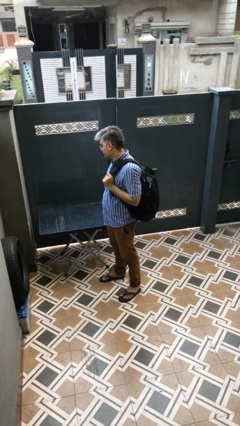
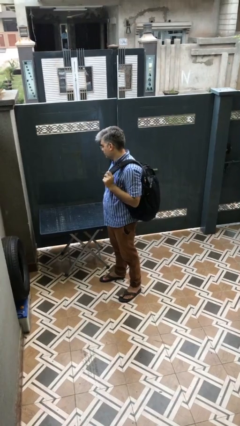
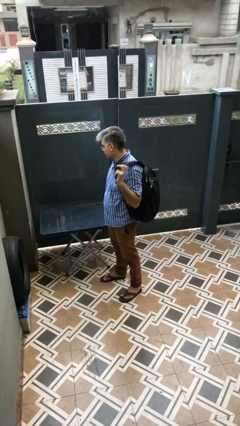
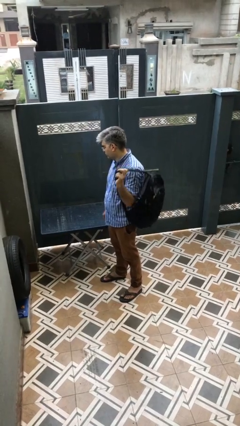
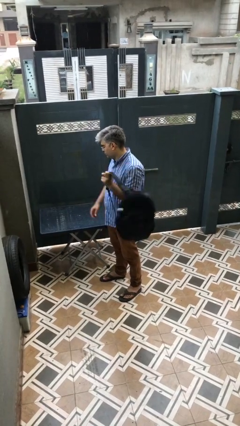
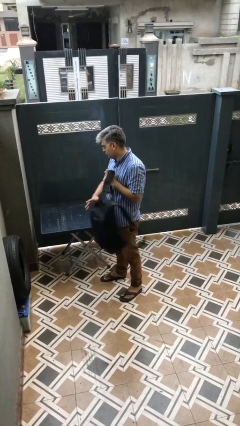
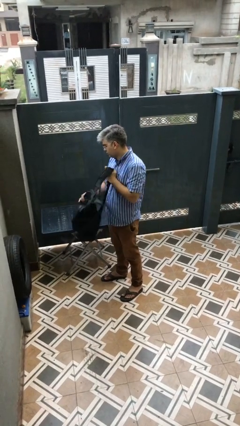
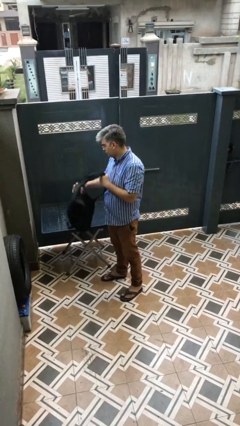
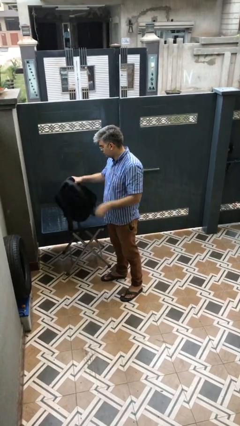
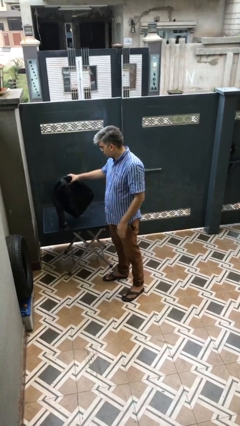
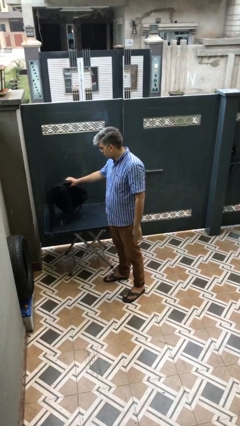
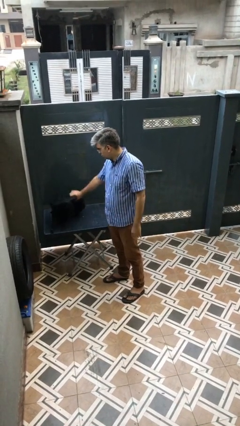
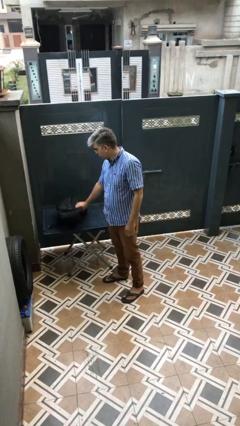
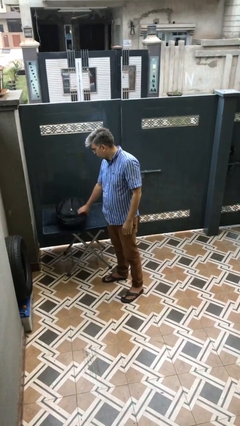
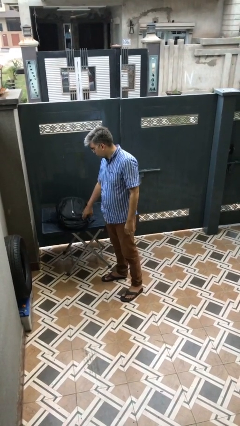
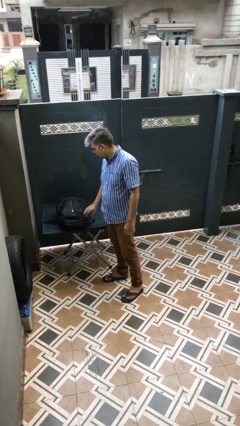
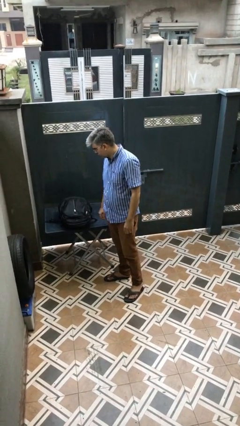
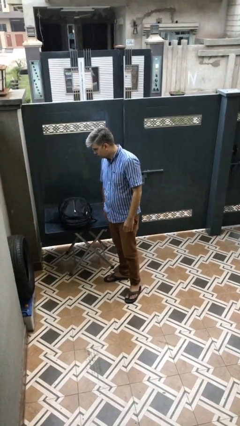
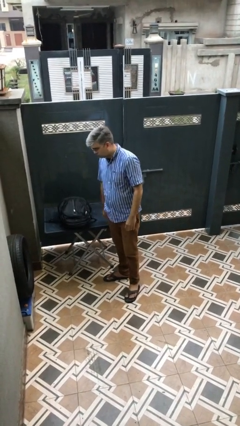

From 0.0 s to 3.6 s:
person puts down object on table

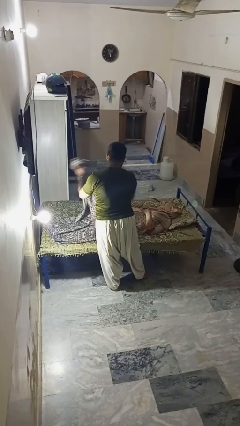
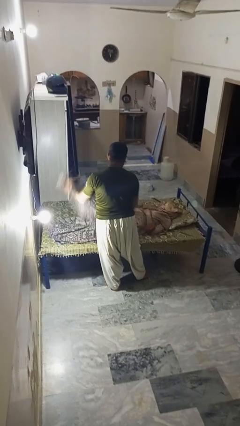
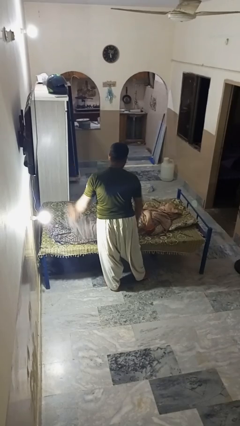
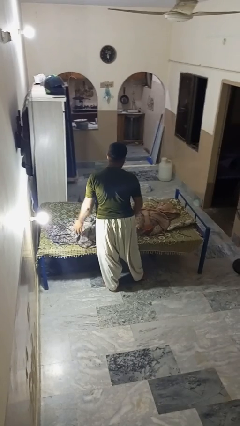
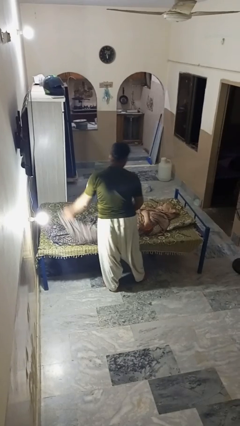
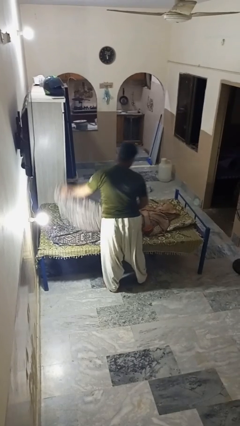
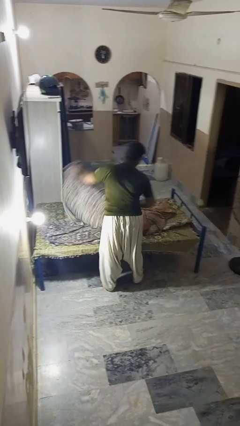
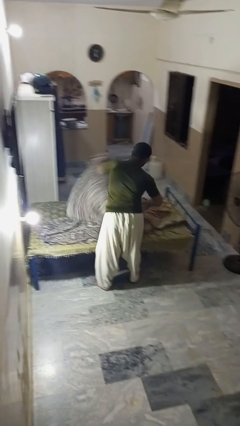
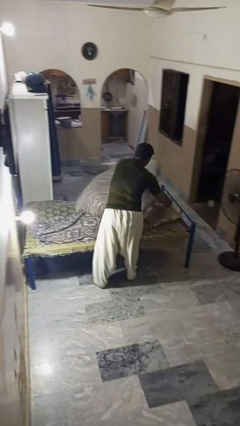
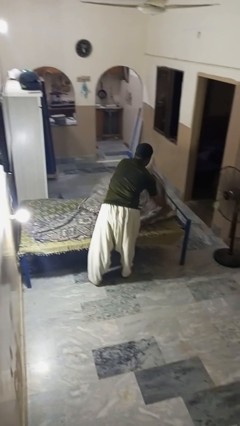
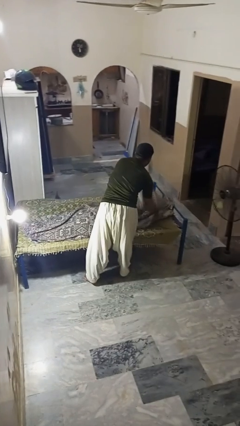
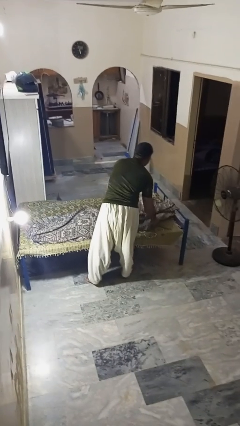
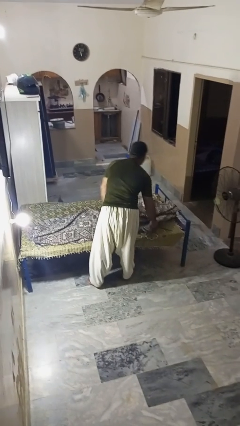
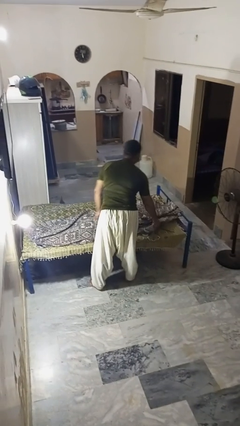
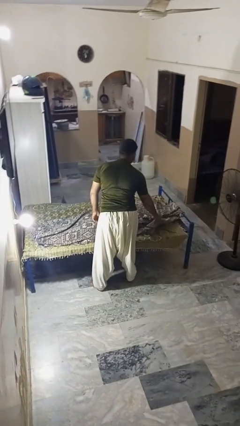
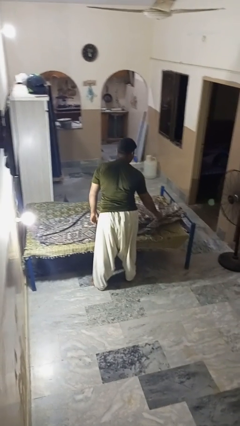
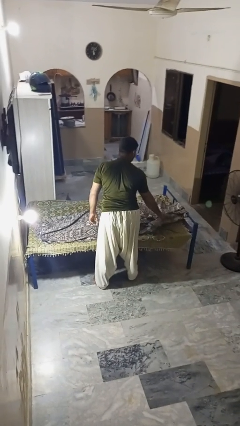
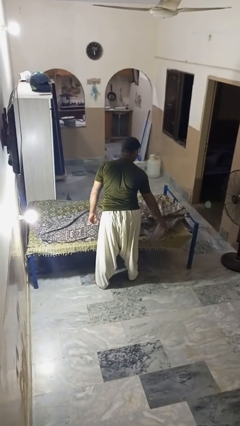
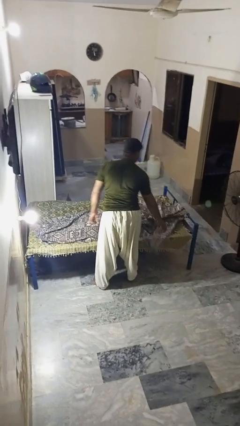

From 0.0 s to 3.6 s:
person covers friend with blanket

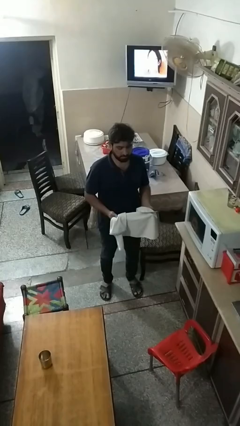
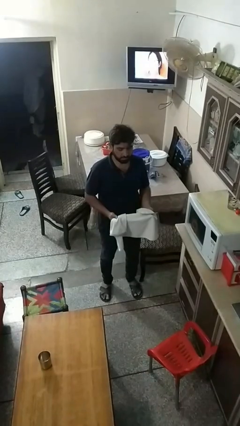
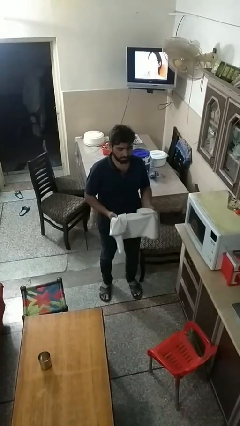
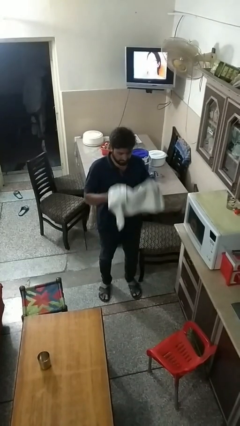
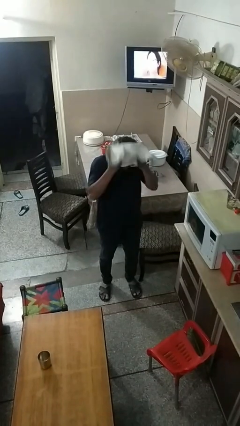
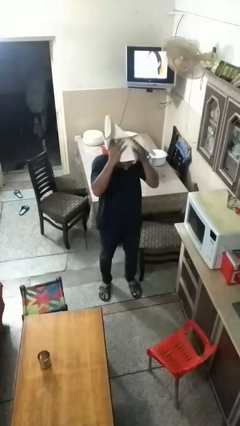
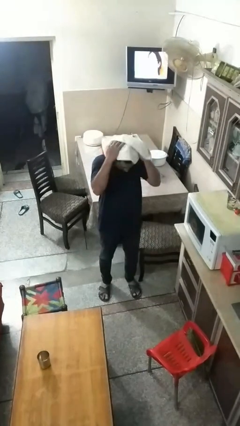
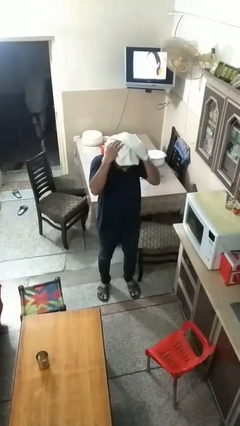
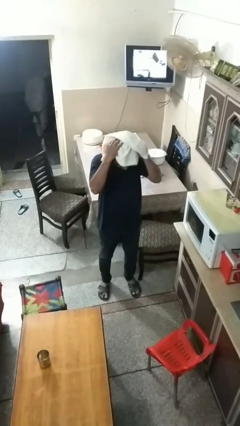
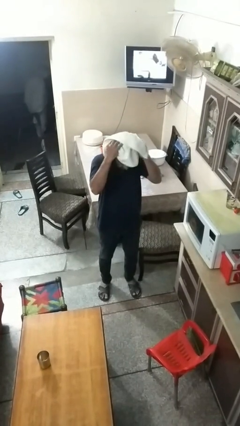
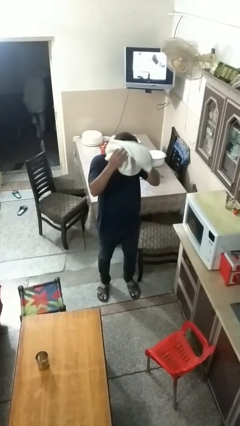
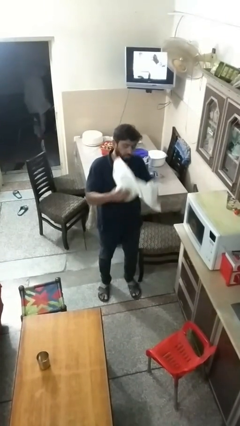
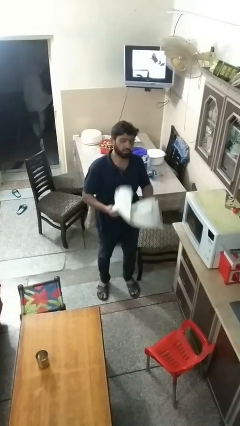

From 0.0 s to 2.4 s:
person dries hair with towel

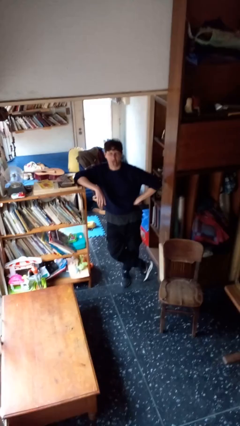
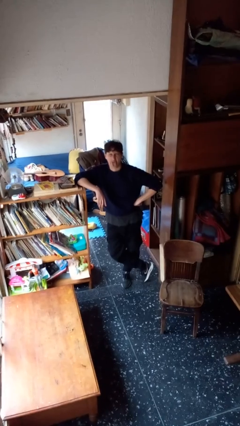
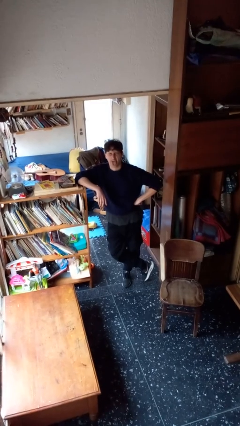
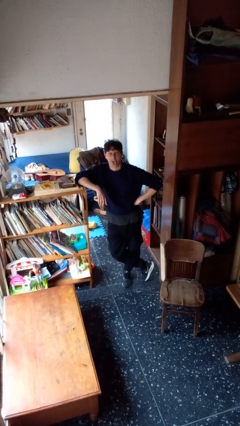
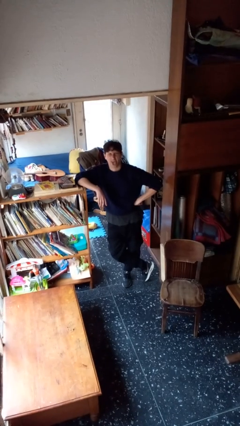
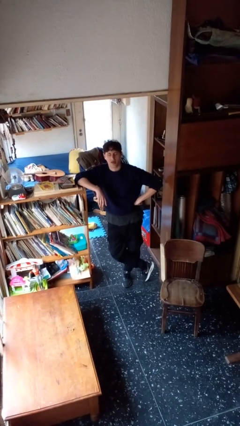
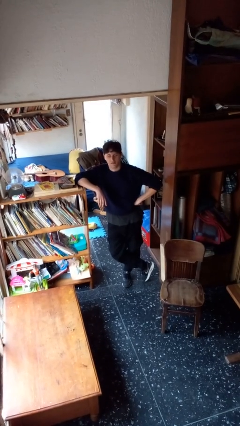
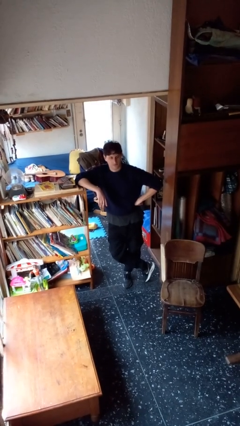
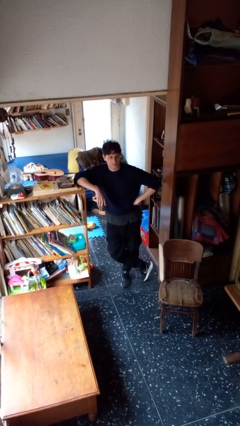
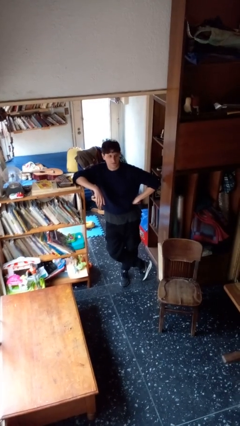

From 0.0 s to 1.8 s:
person sticks out tongue

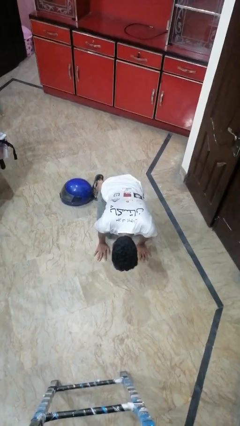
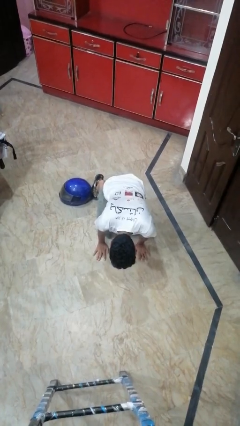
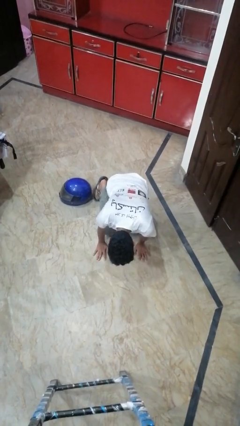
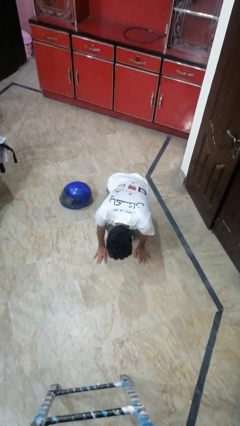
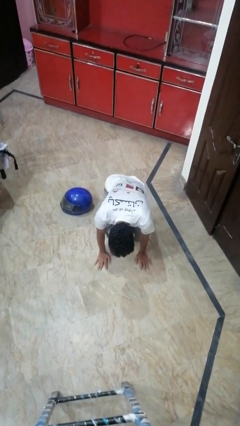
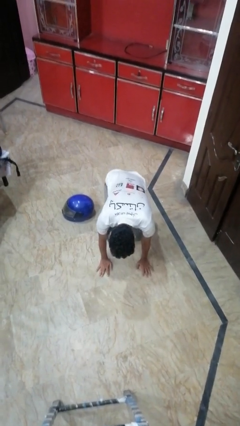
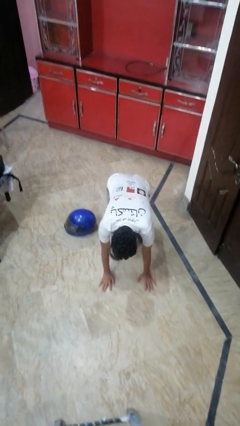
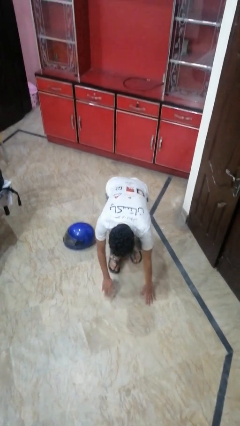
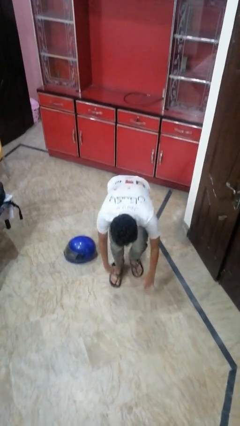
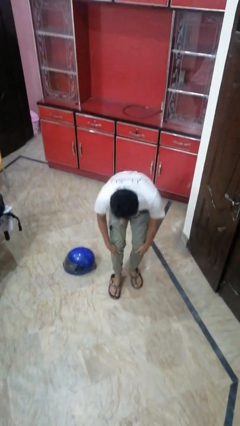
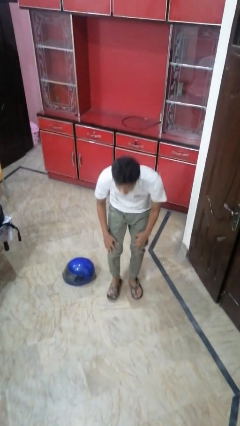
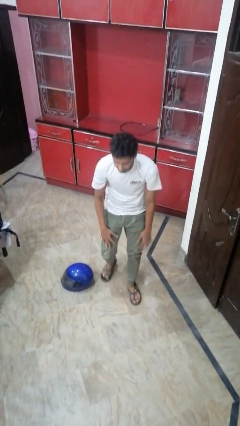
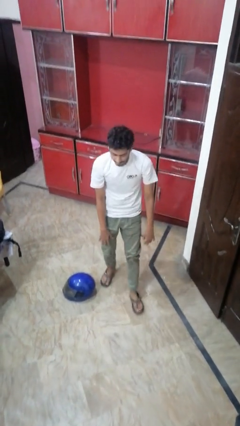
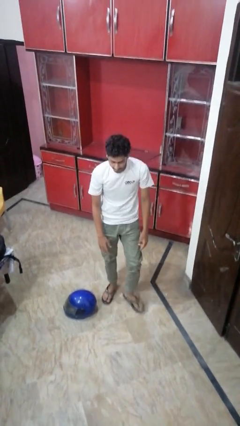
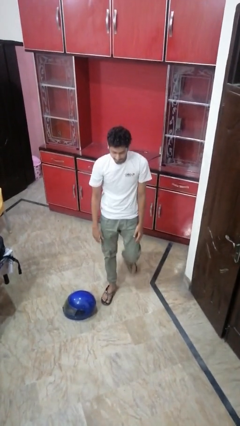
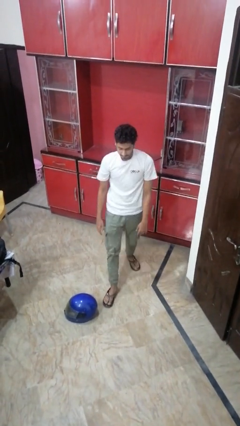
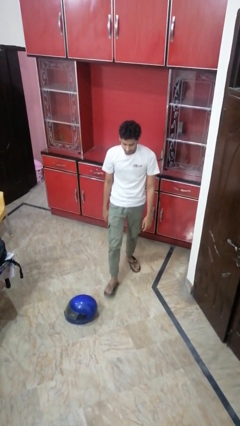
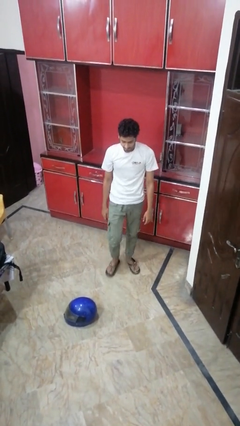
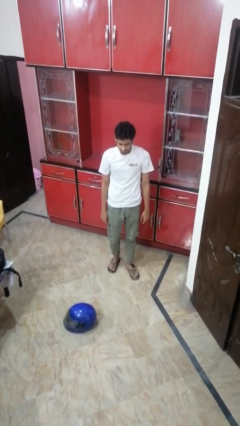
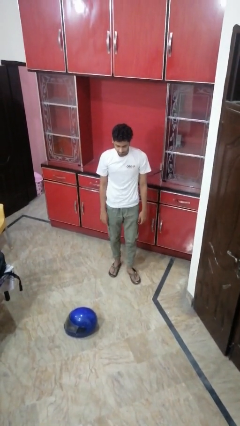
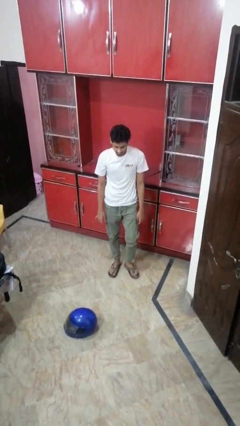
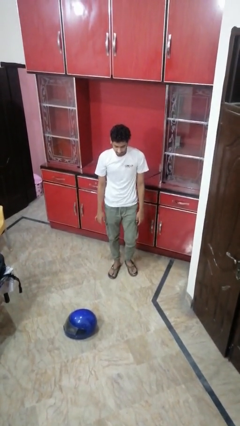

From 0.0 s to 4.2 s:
person stands up from floor

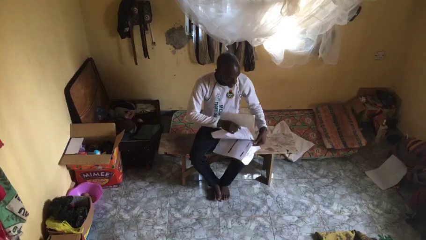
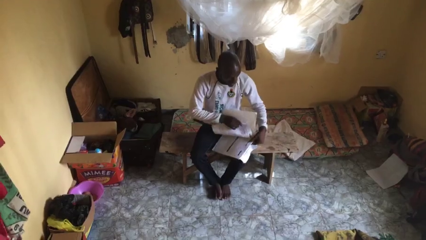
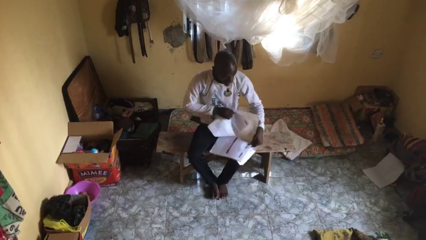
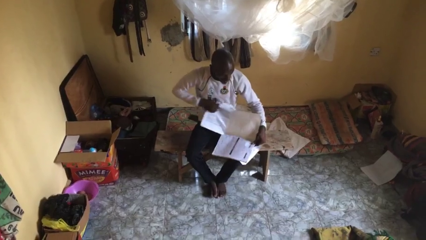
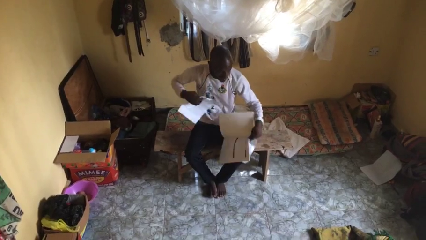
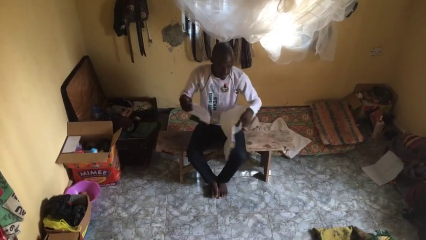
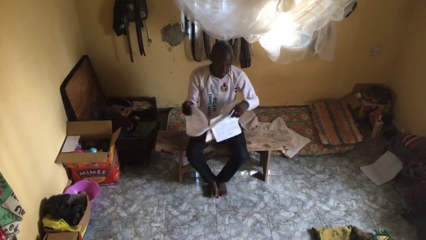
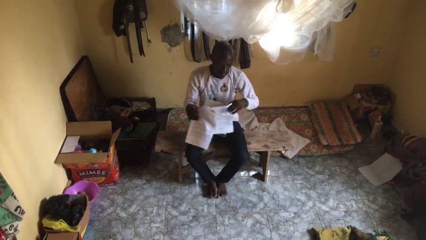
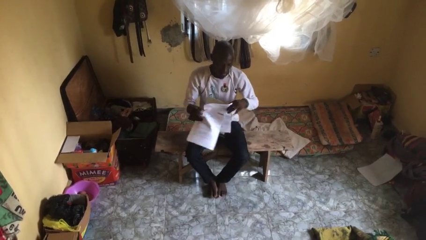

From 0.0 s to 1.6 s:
person tears paper

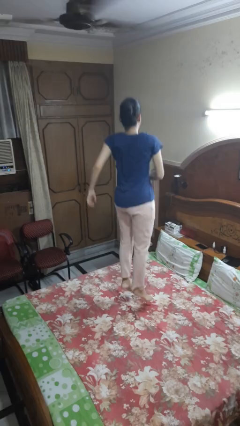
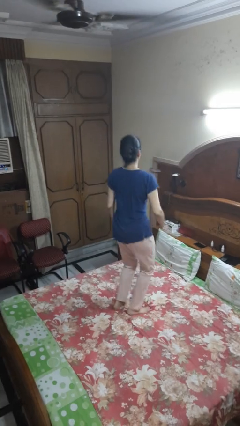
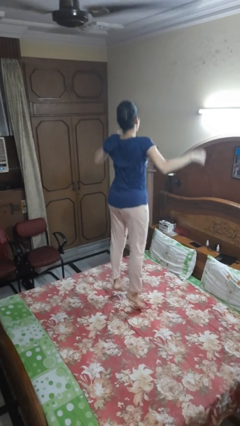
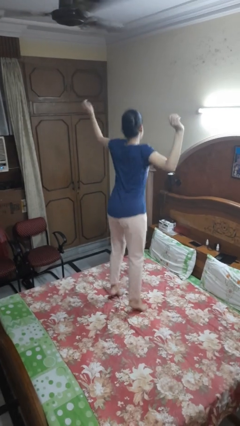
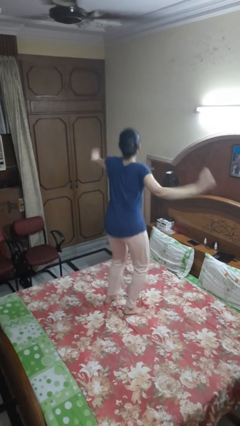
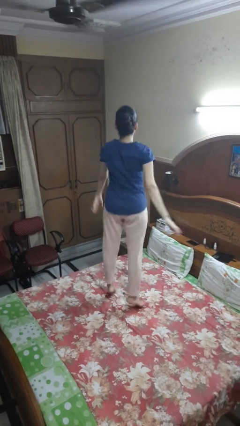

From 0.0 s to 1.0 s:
person jumps on bed
